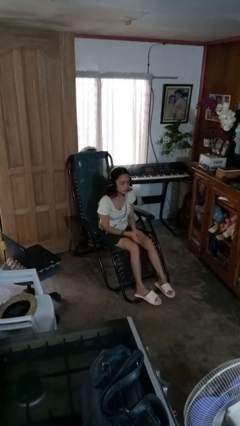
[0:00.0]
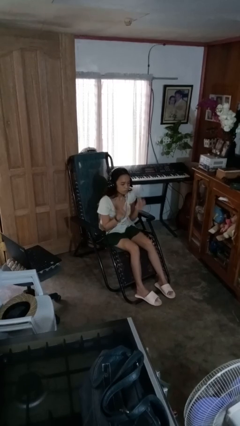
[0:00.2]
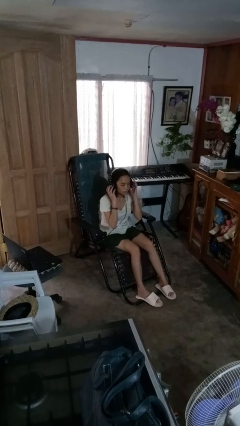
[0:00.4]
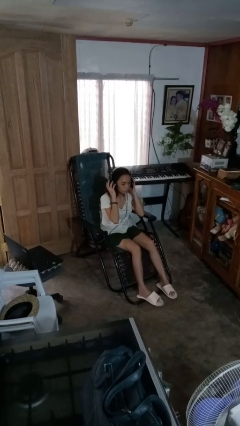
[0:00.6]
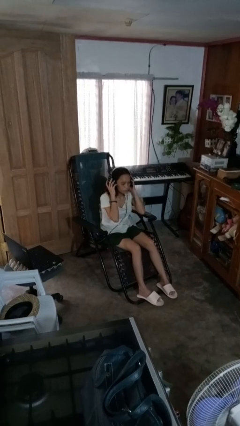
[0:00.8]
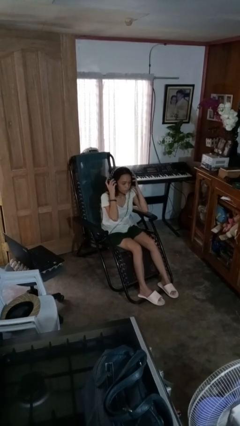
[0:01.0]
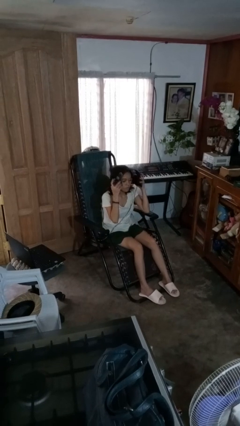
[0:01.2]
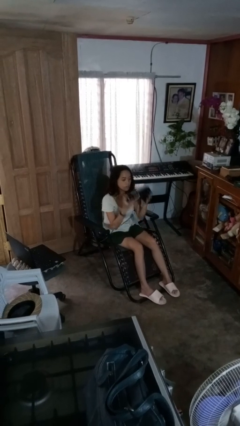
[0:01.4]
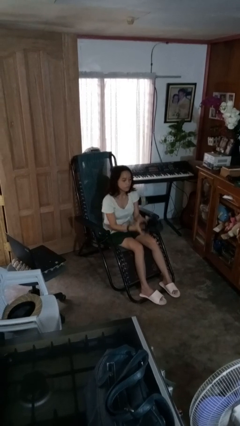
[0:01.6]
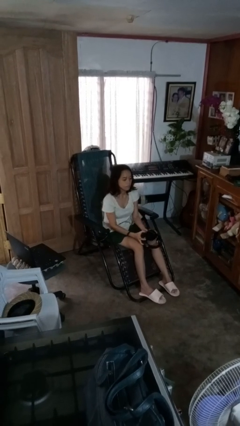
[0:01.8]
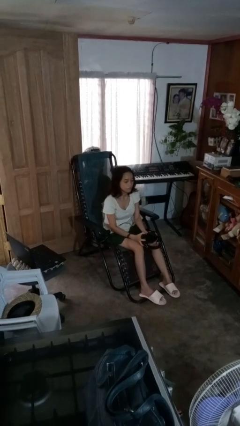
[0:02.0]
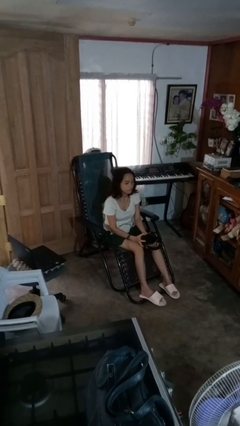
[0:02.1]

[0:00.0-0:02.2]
person takes off headphones

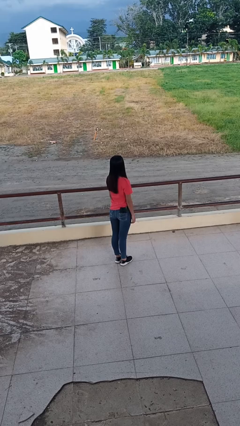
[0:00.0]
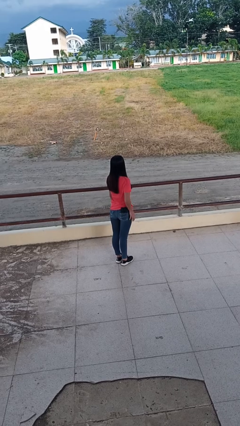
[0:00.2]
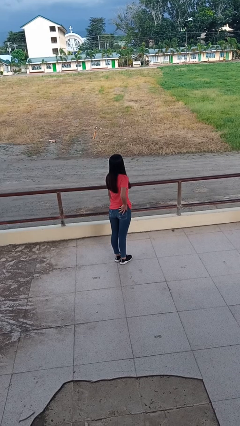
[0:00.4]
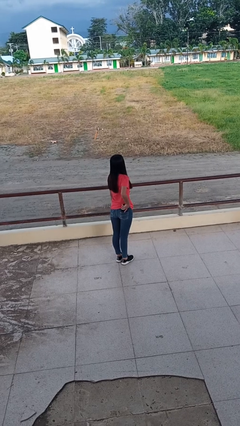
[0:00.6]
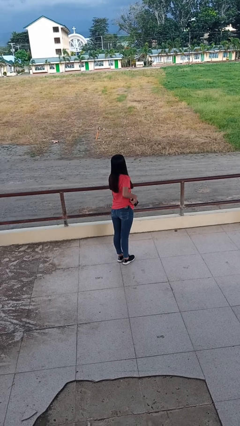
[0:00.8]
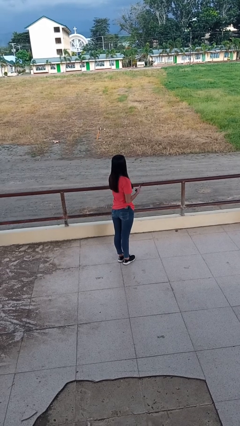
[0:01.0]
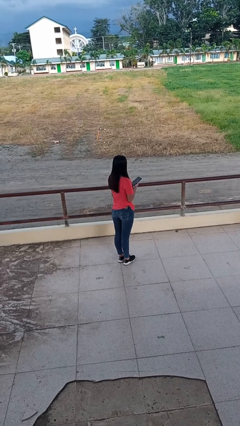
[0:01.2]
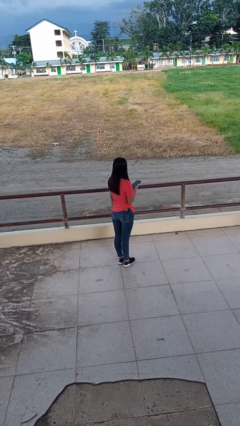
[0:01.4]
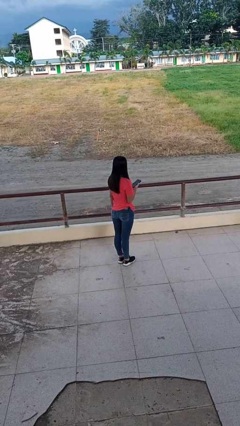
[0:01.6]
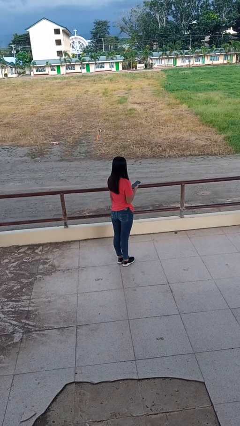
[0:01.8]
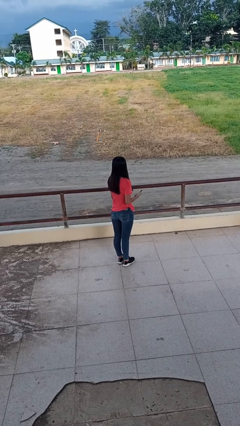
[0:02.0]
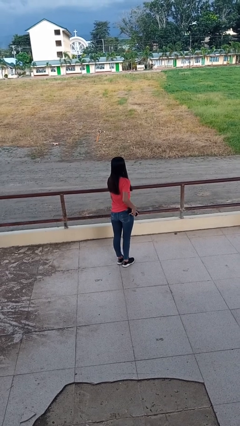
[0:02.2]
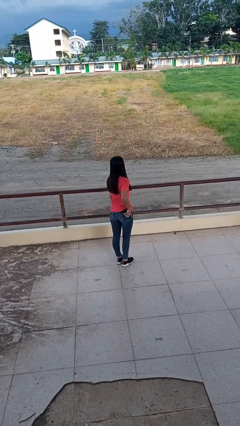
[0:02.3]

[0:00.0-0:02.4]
person takes phone from pocket

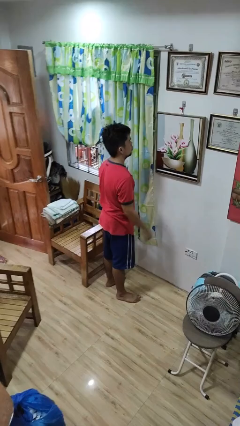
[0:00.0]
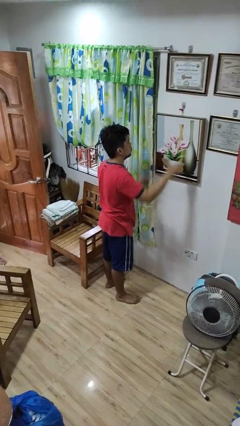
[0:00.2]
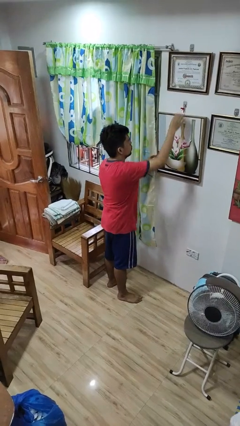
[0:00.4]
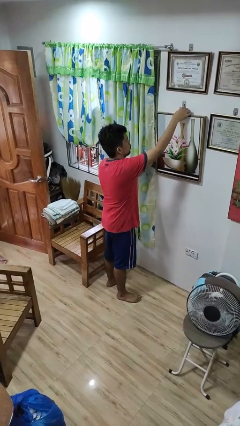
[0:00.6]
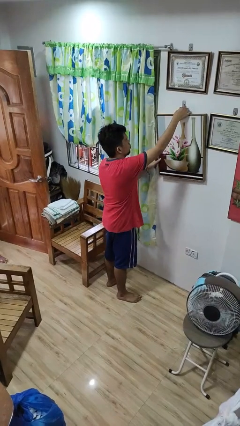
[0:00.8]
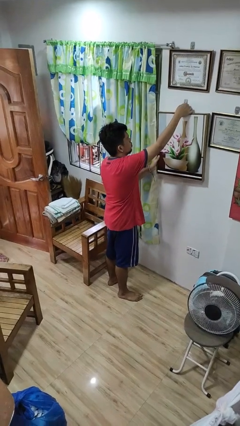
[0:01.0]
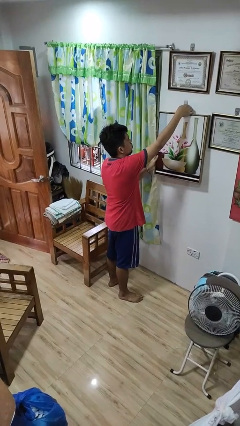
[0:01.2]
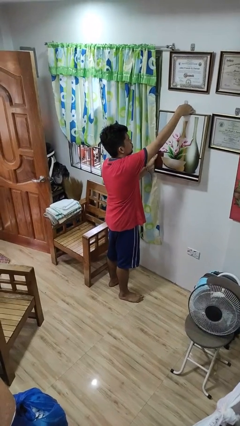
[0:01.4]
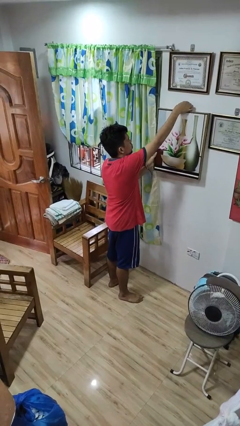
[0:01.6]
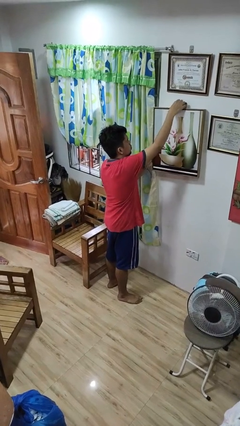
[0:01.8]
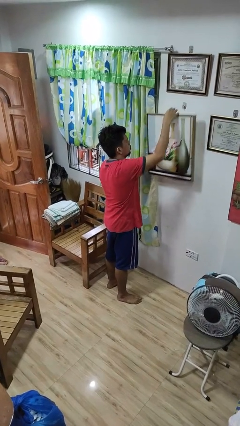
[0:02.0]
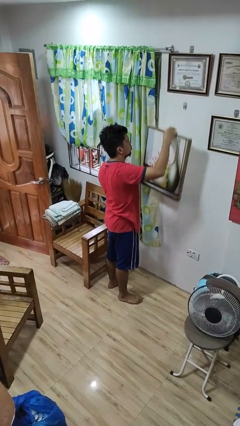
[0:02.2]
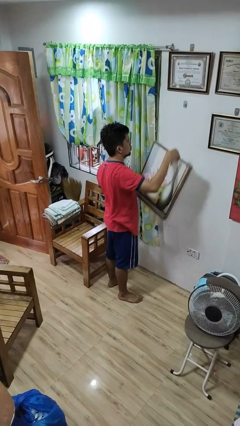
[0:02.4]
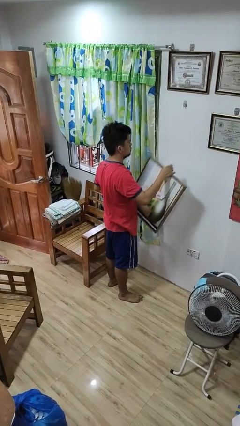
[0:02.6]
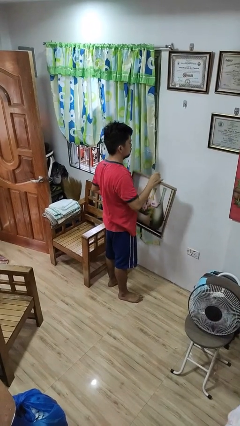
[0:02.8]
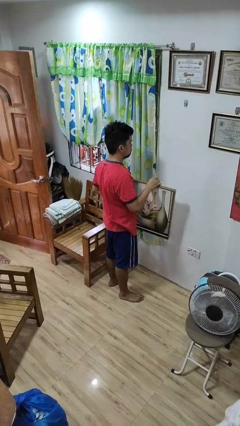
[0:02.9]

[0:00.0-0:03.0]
person takes down picture frame

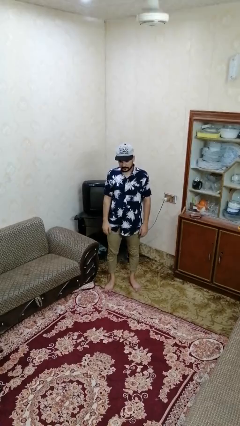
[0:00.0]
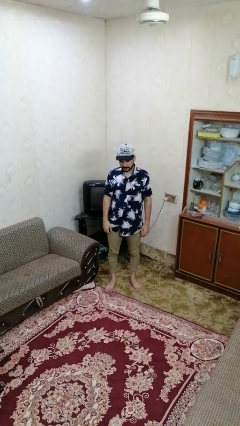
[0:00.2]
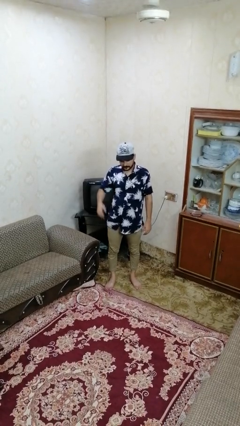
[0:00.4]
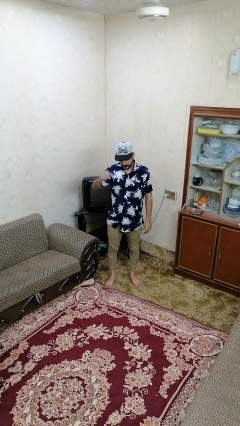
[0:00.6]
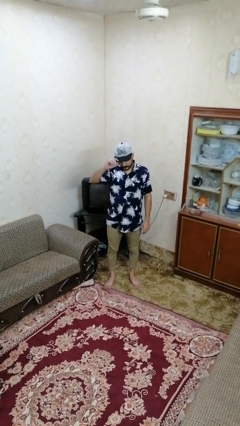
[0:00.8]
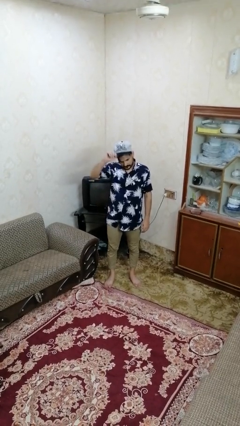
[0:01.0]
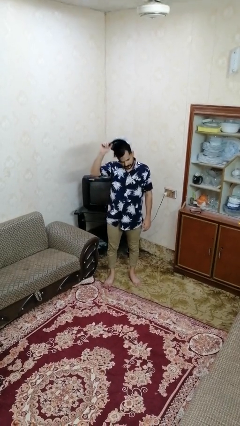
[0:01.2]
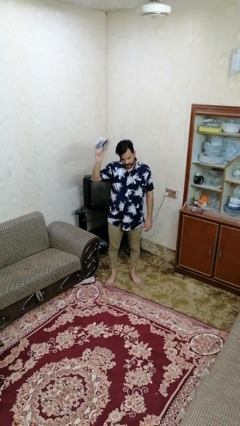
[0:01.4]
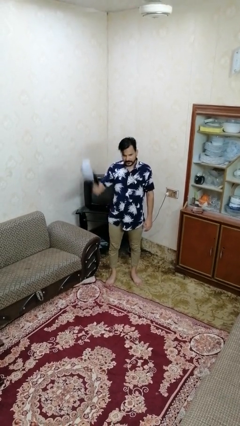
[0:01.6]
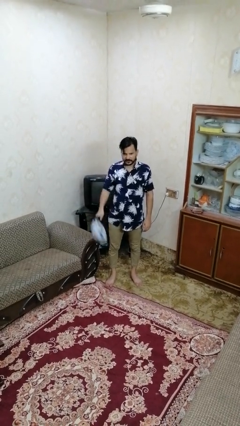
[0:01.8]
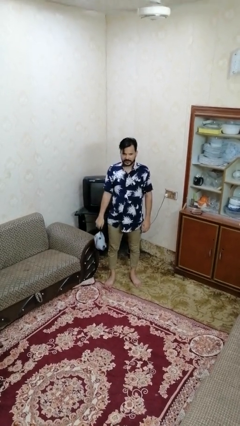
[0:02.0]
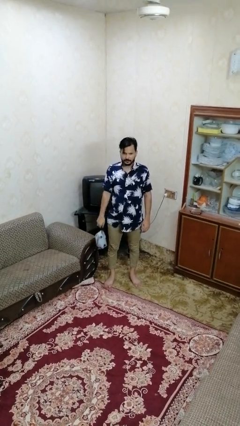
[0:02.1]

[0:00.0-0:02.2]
person takes off hat

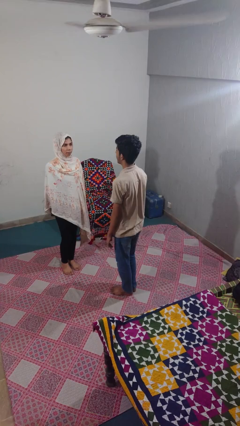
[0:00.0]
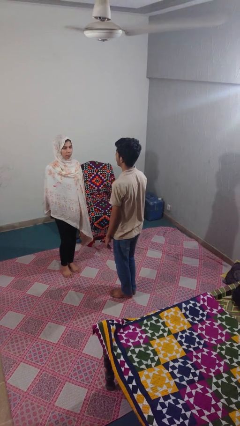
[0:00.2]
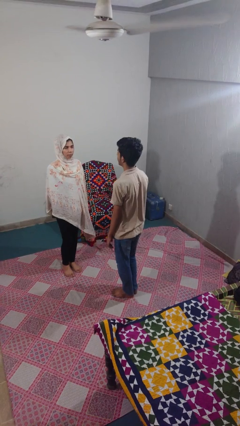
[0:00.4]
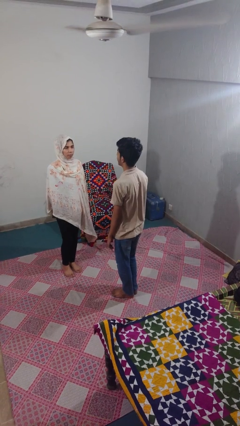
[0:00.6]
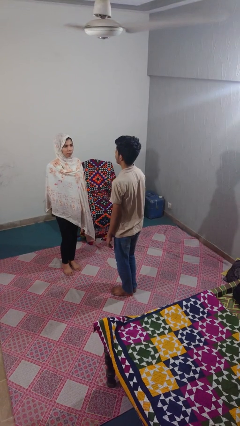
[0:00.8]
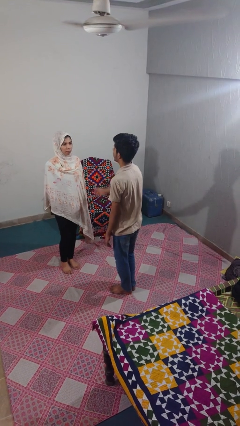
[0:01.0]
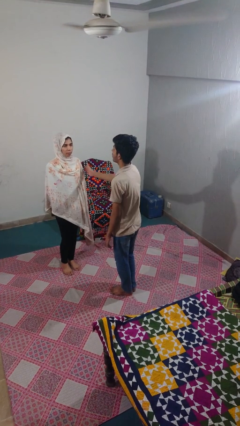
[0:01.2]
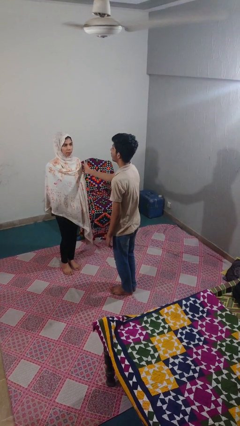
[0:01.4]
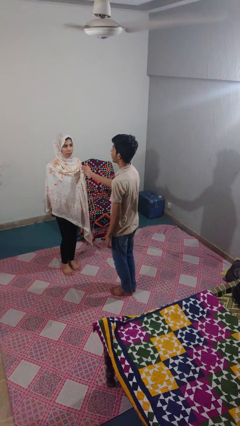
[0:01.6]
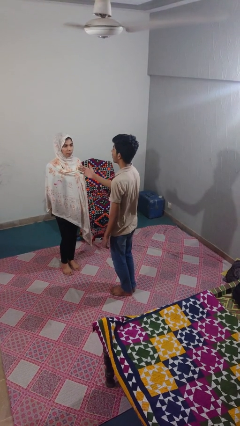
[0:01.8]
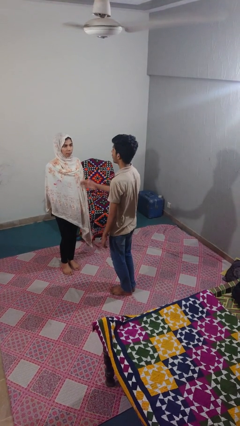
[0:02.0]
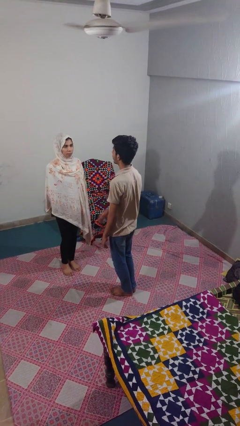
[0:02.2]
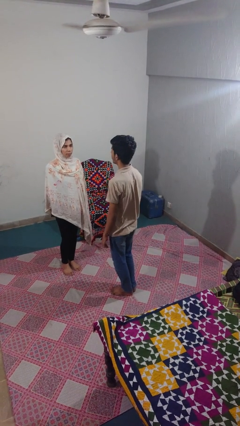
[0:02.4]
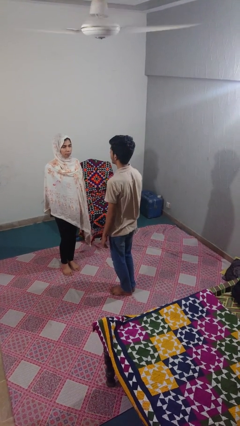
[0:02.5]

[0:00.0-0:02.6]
person shoves person

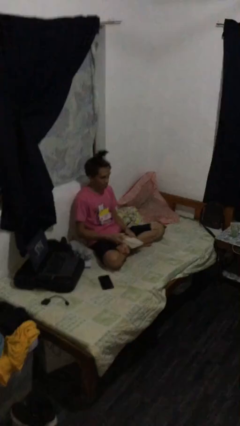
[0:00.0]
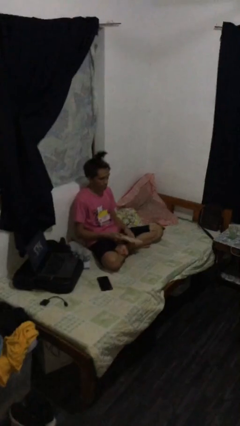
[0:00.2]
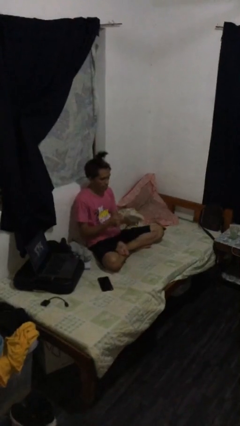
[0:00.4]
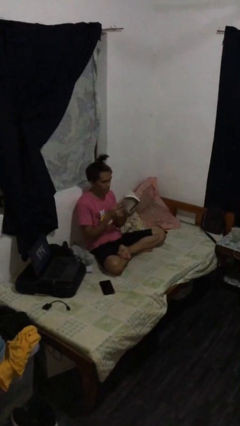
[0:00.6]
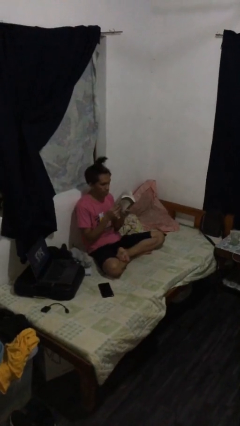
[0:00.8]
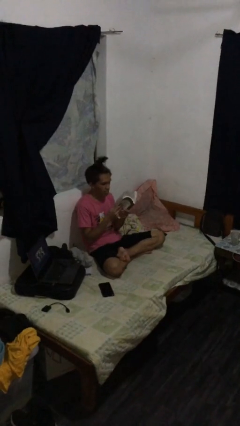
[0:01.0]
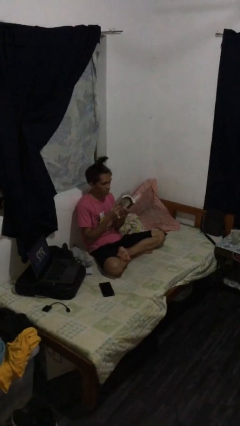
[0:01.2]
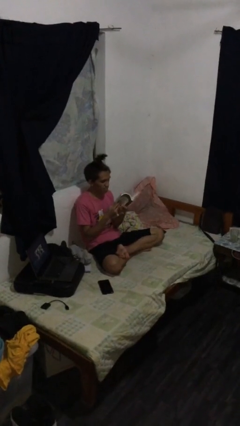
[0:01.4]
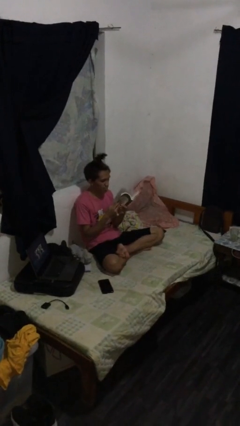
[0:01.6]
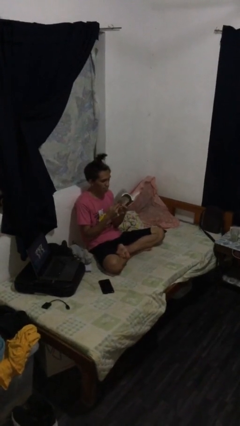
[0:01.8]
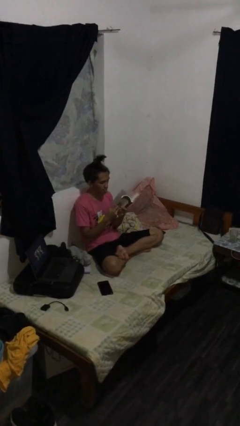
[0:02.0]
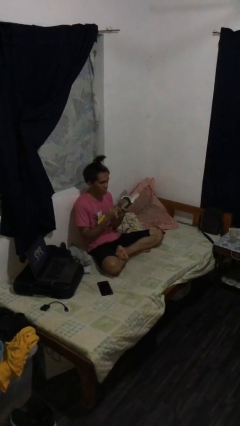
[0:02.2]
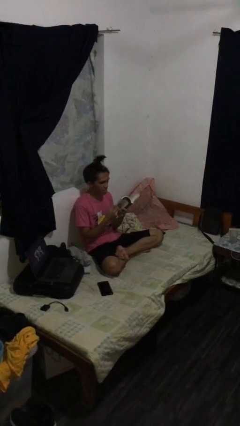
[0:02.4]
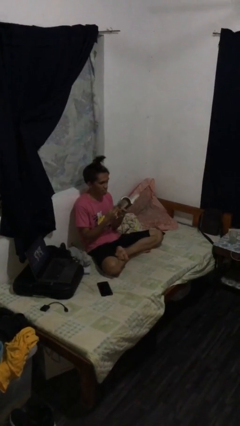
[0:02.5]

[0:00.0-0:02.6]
person reads document

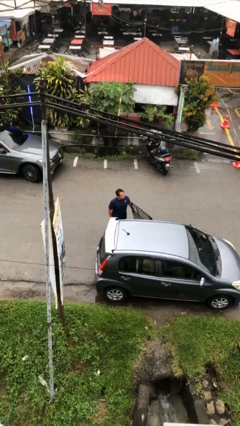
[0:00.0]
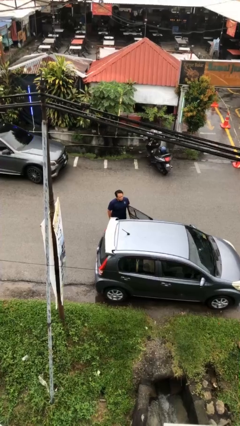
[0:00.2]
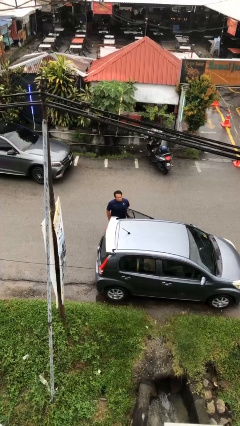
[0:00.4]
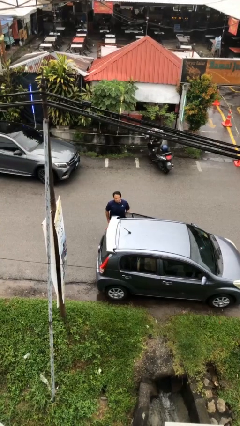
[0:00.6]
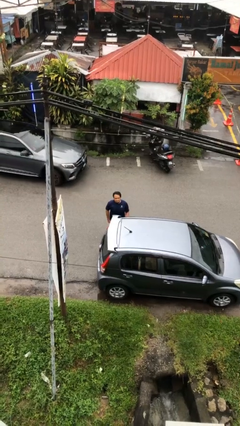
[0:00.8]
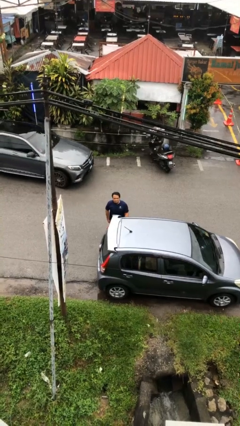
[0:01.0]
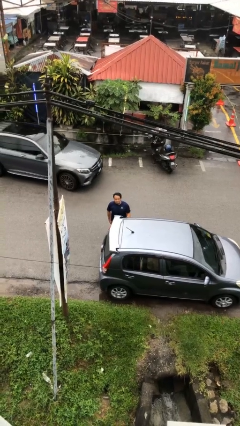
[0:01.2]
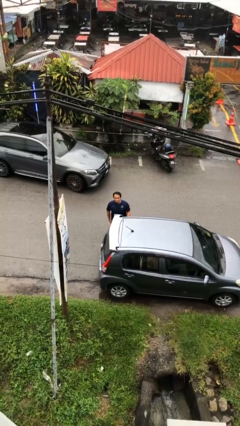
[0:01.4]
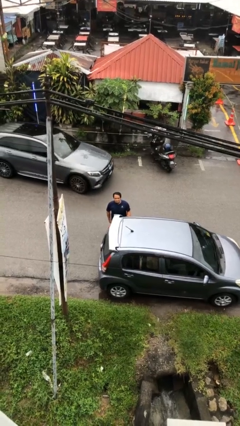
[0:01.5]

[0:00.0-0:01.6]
person closes car door

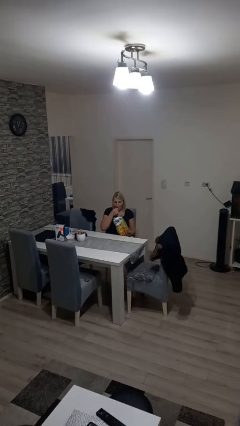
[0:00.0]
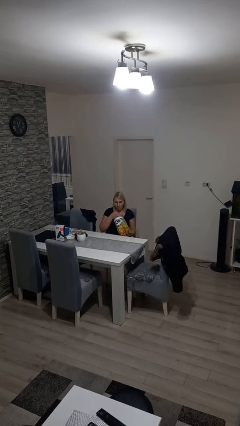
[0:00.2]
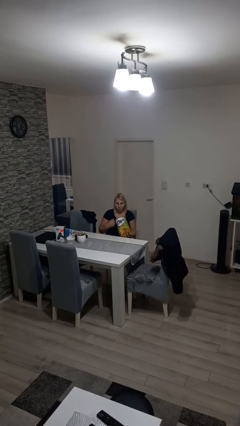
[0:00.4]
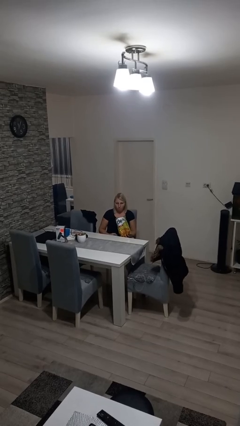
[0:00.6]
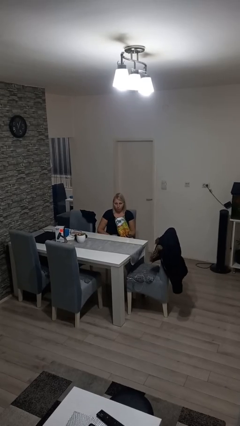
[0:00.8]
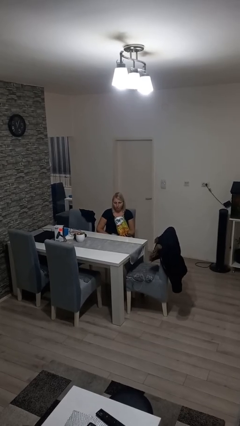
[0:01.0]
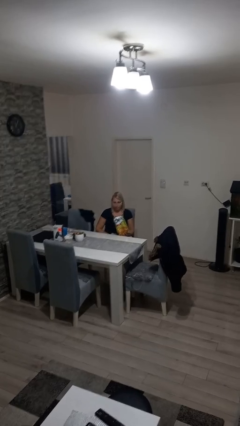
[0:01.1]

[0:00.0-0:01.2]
person eats snack from bag
